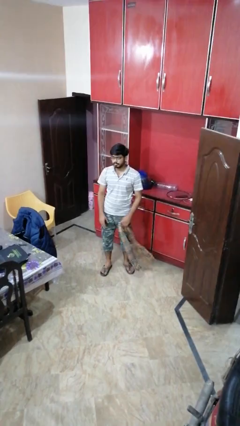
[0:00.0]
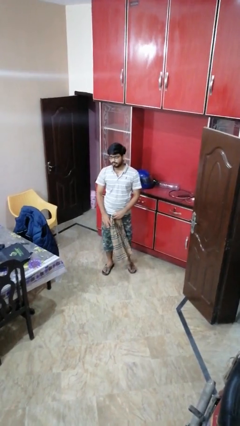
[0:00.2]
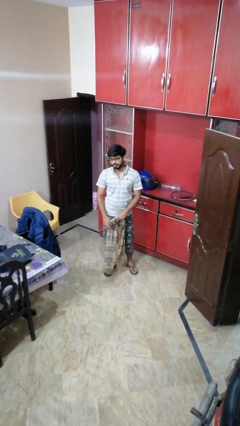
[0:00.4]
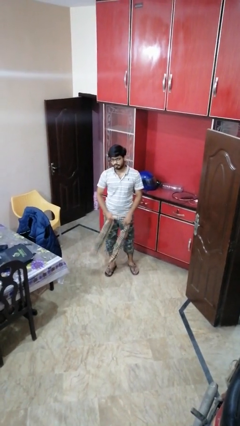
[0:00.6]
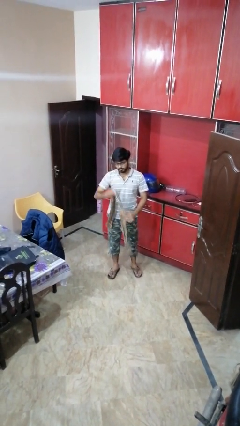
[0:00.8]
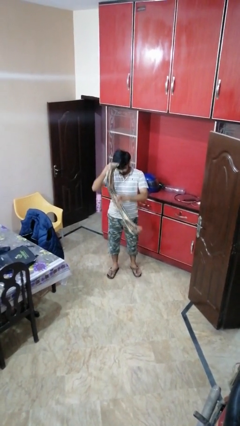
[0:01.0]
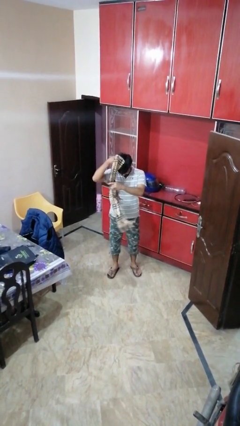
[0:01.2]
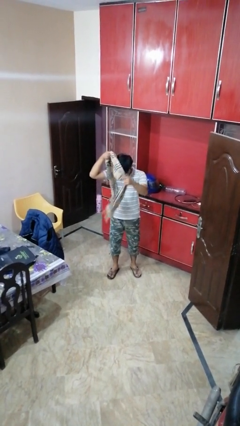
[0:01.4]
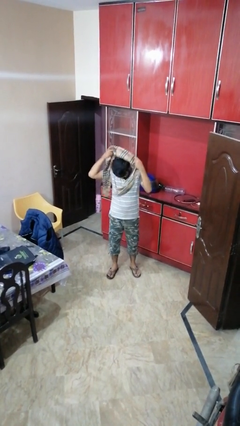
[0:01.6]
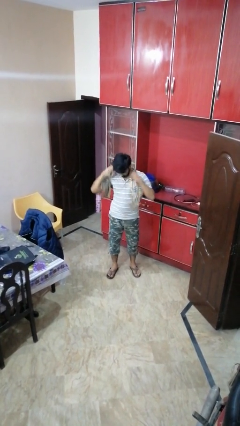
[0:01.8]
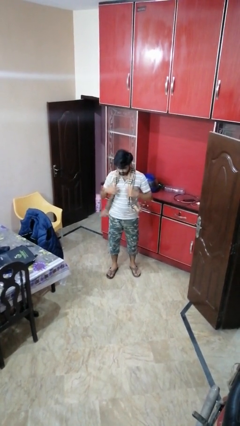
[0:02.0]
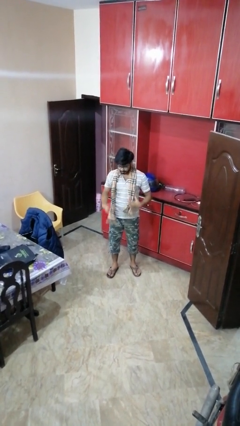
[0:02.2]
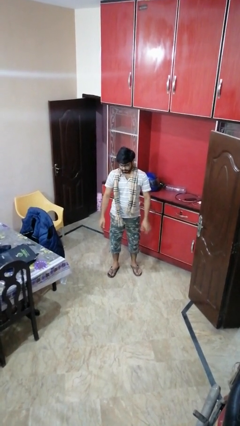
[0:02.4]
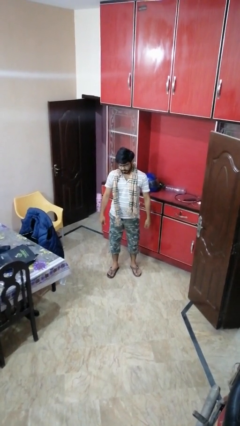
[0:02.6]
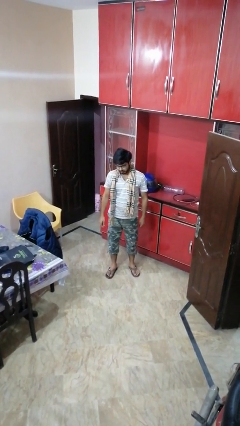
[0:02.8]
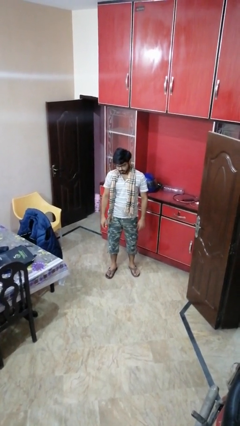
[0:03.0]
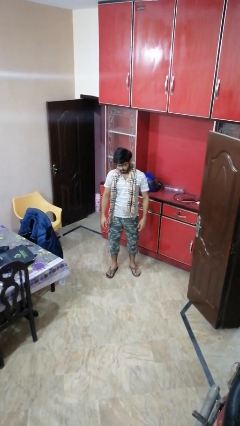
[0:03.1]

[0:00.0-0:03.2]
person puts on scarf

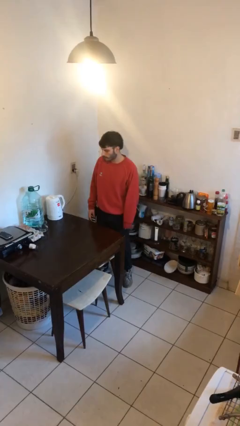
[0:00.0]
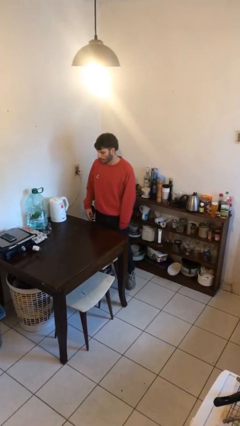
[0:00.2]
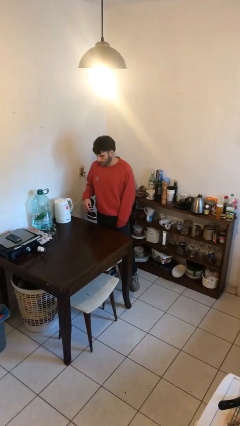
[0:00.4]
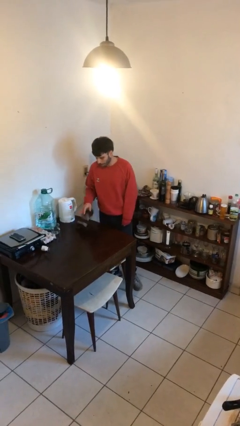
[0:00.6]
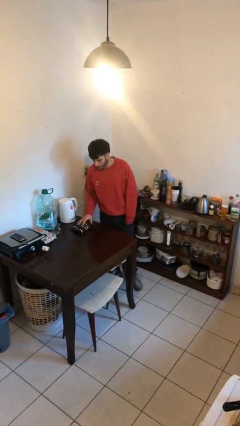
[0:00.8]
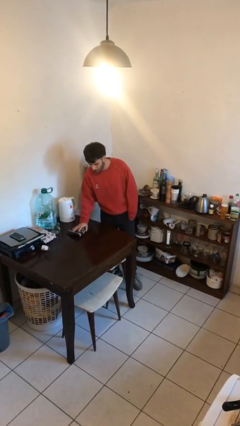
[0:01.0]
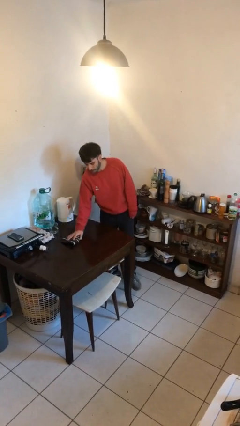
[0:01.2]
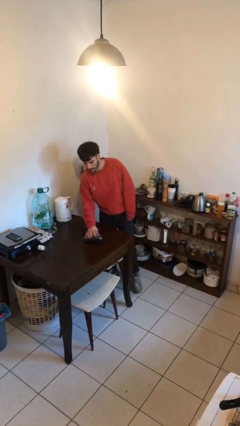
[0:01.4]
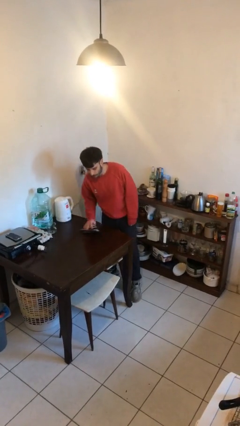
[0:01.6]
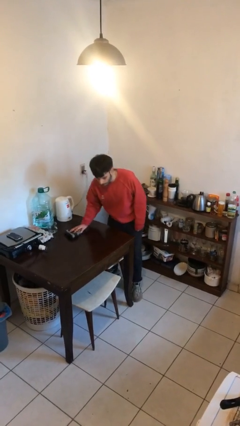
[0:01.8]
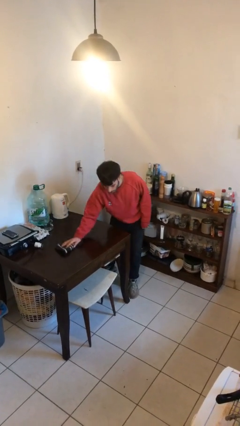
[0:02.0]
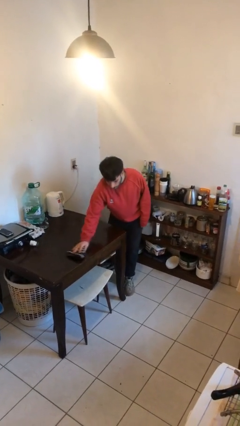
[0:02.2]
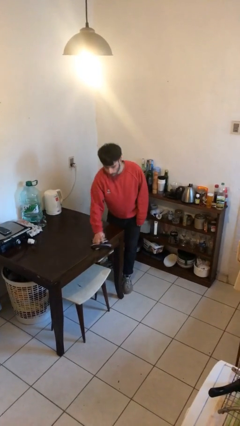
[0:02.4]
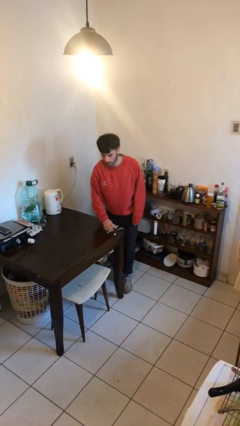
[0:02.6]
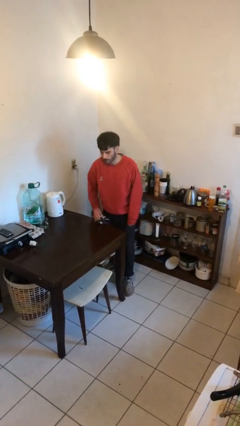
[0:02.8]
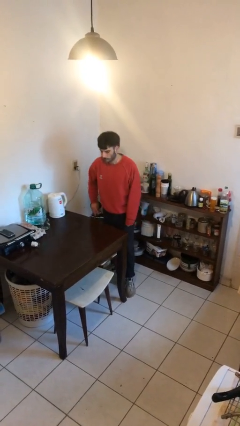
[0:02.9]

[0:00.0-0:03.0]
person cleans table with rag

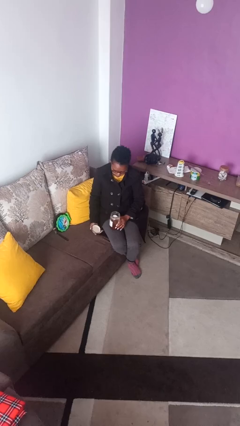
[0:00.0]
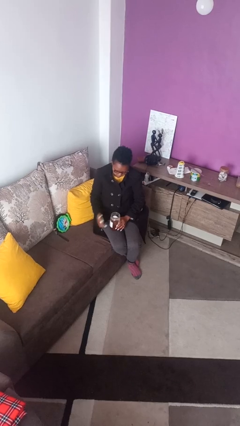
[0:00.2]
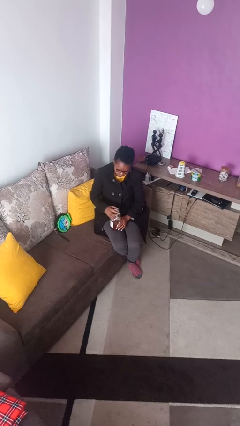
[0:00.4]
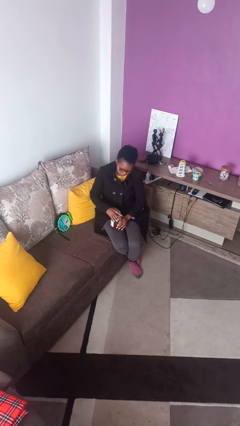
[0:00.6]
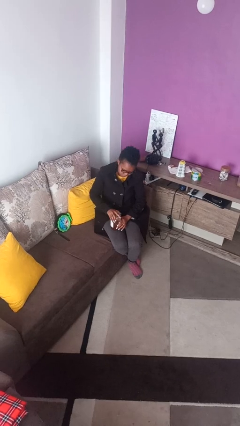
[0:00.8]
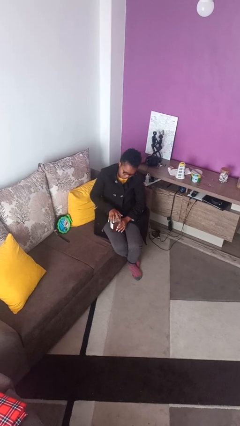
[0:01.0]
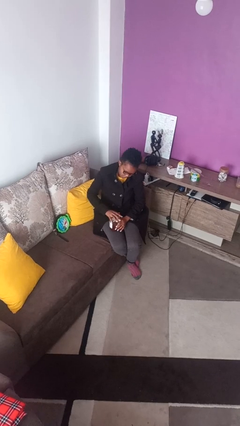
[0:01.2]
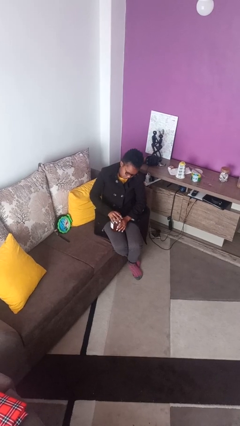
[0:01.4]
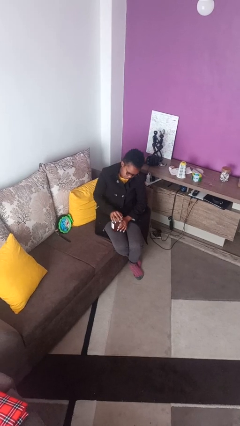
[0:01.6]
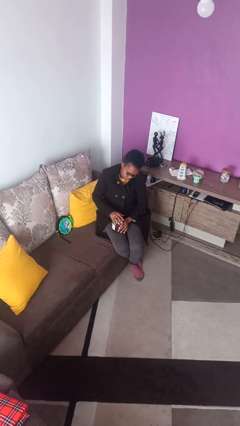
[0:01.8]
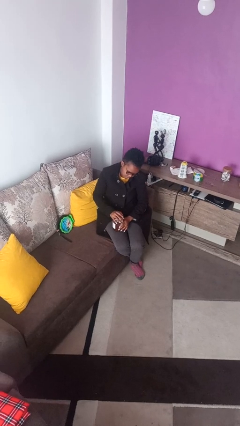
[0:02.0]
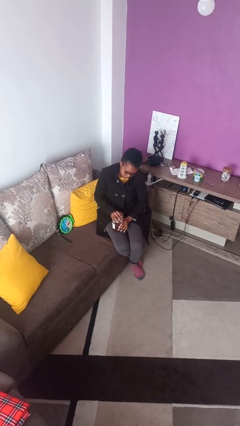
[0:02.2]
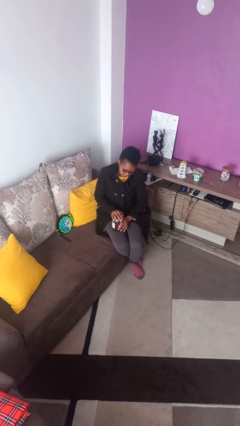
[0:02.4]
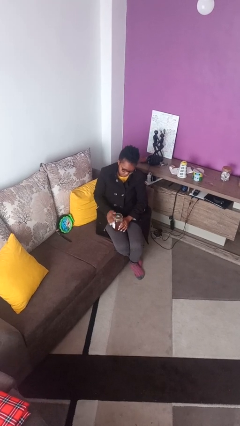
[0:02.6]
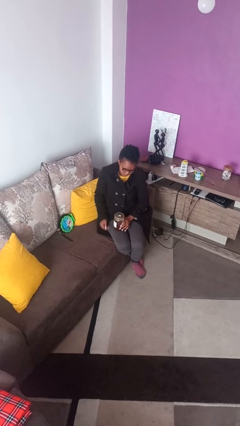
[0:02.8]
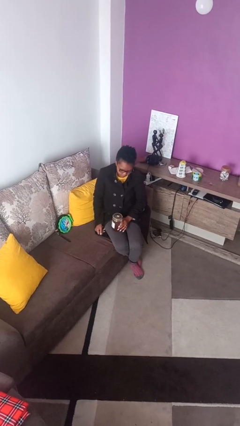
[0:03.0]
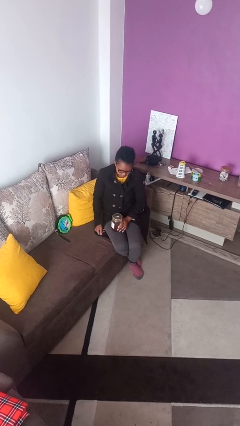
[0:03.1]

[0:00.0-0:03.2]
person closes jar

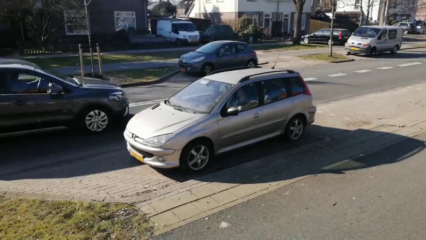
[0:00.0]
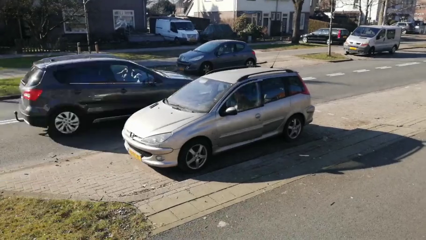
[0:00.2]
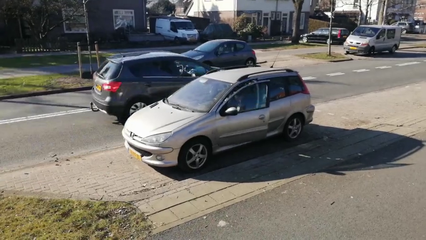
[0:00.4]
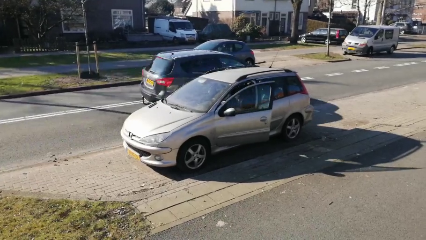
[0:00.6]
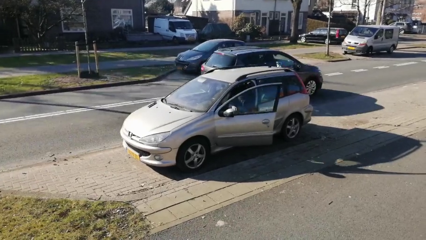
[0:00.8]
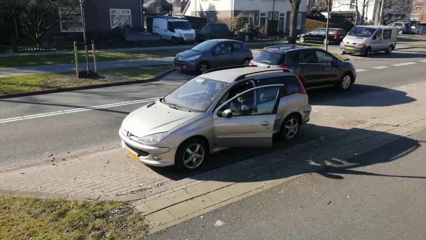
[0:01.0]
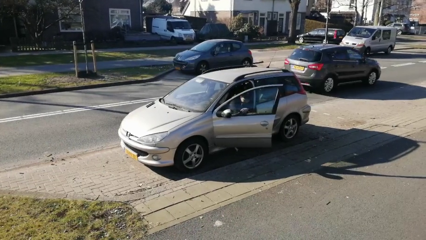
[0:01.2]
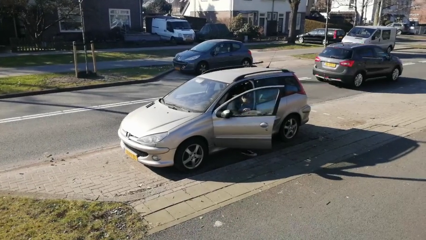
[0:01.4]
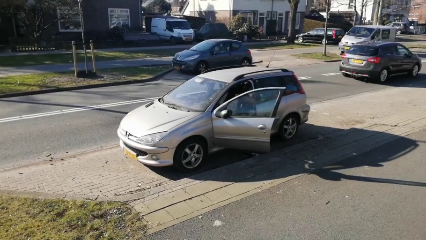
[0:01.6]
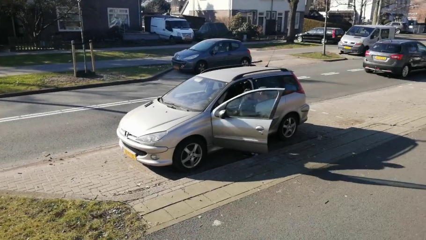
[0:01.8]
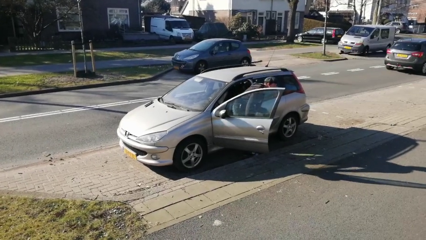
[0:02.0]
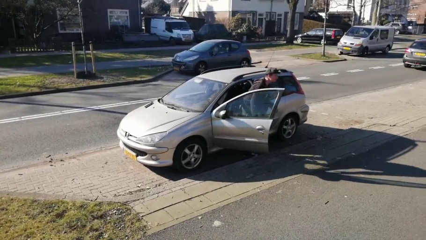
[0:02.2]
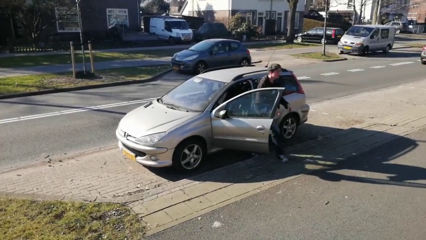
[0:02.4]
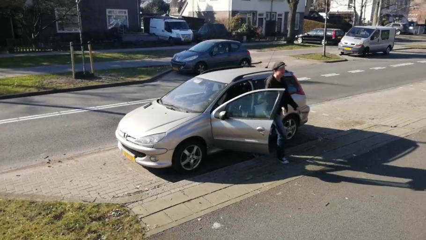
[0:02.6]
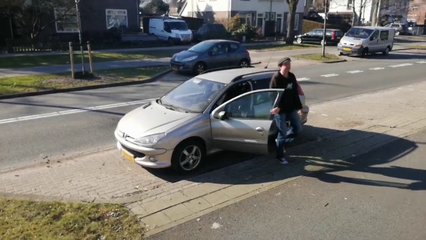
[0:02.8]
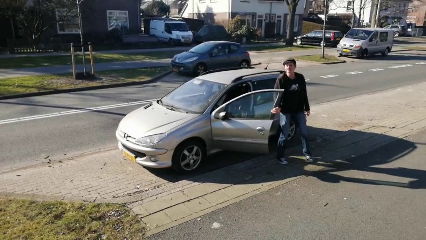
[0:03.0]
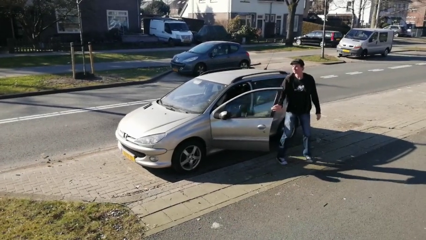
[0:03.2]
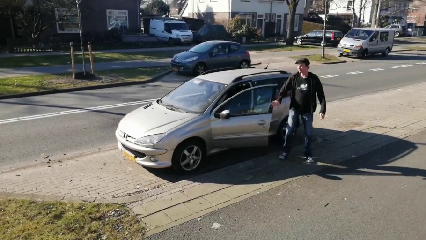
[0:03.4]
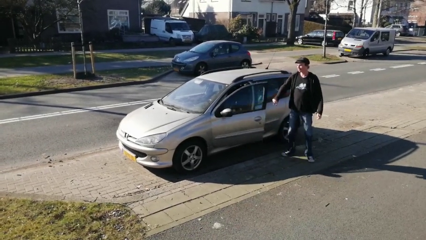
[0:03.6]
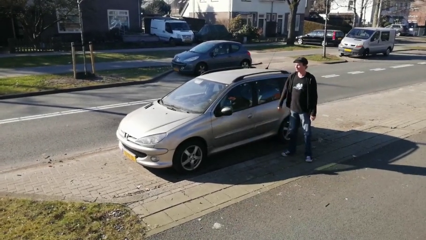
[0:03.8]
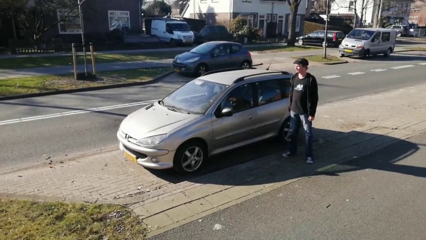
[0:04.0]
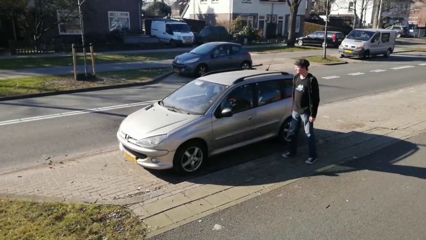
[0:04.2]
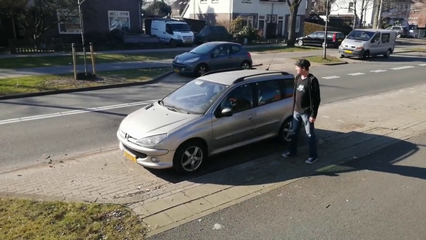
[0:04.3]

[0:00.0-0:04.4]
car drops off person

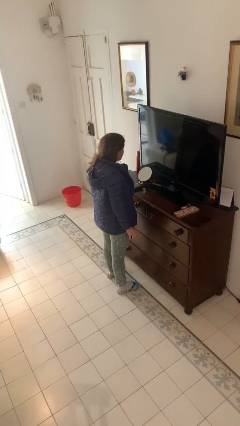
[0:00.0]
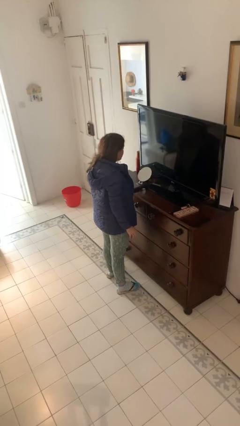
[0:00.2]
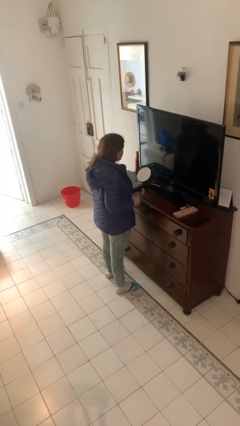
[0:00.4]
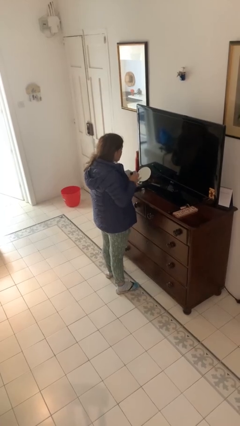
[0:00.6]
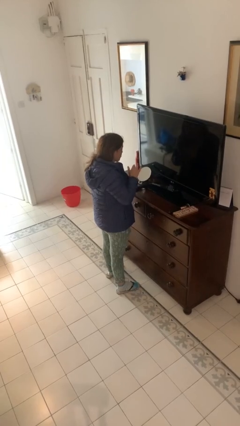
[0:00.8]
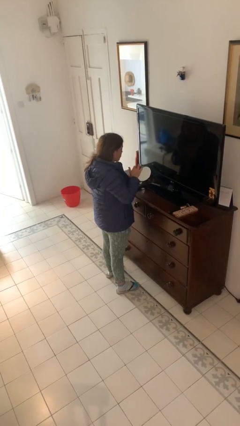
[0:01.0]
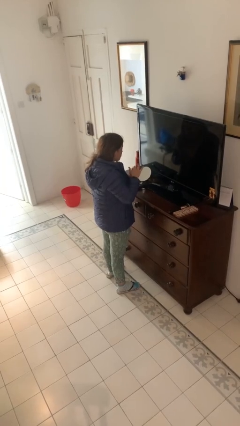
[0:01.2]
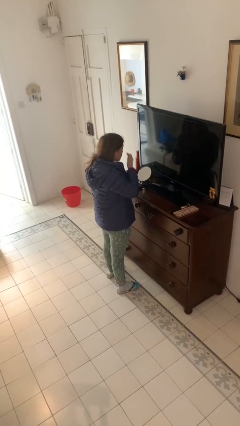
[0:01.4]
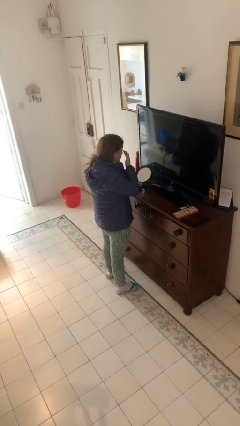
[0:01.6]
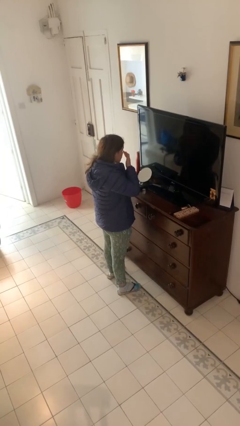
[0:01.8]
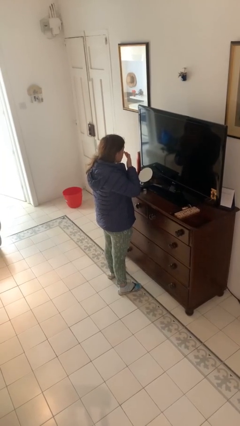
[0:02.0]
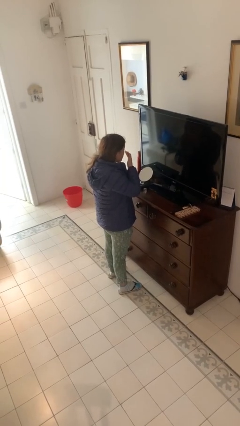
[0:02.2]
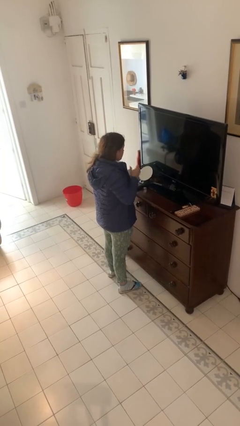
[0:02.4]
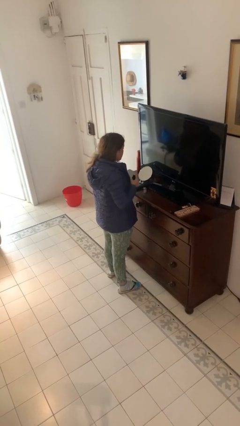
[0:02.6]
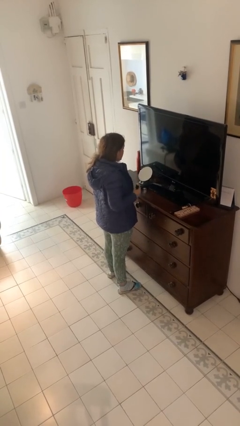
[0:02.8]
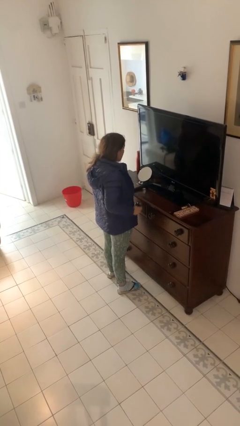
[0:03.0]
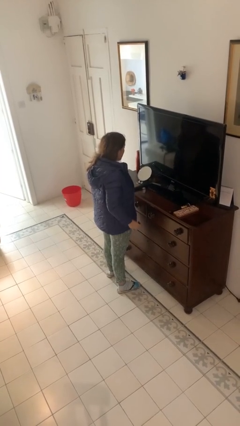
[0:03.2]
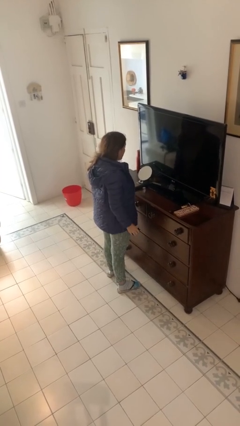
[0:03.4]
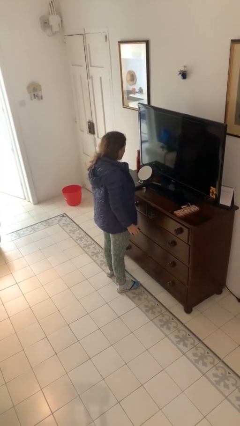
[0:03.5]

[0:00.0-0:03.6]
person applies foundation makeup
